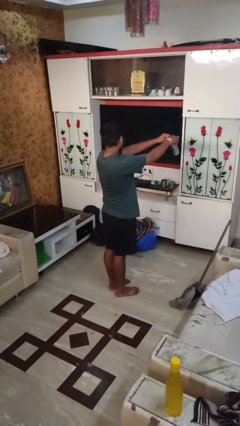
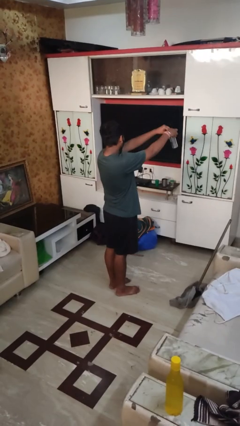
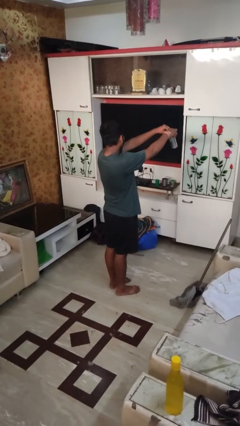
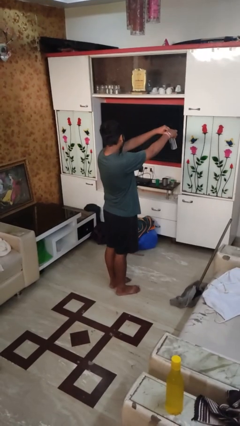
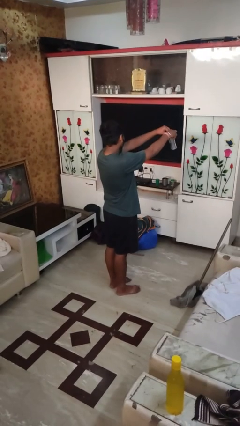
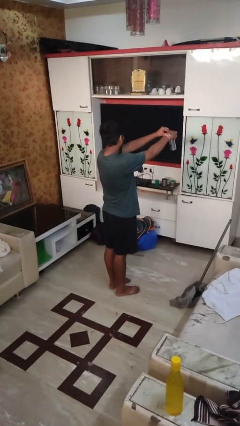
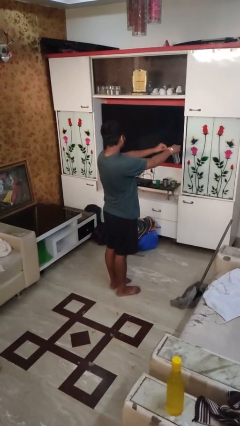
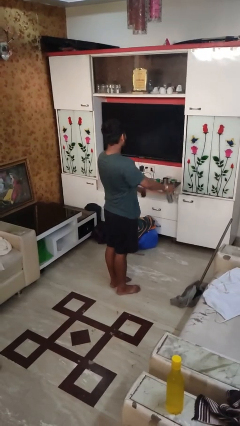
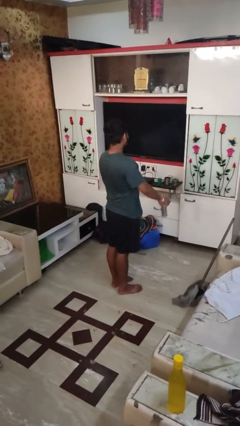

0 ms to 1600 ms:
person opens beverage can

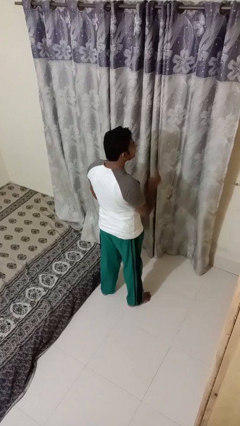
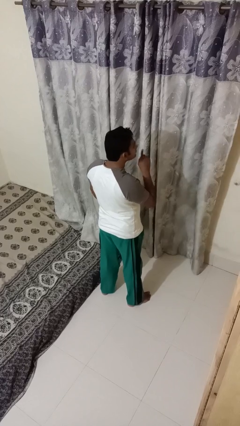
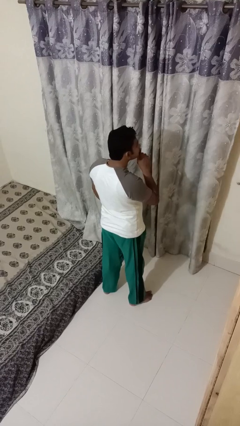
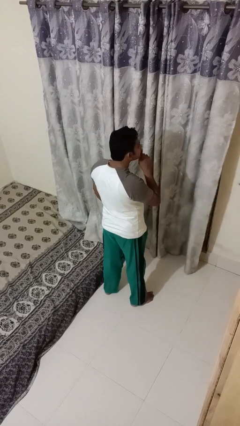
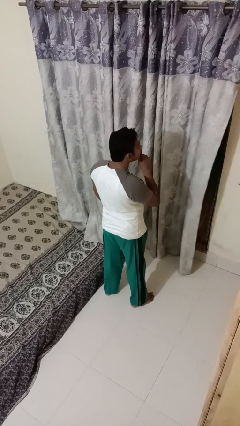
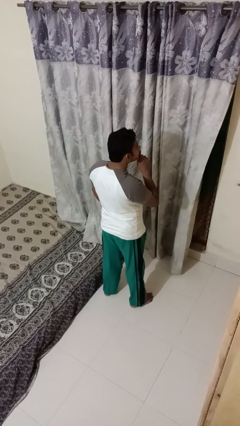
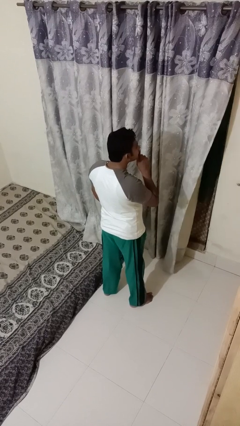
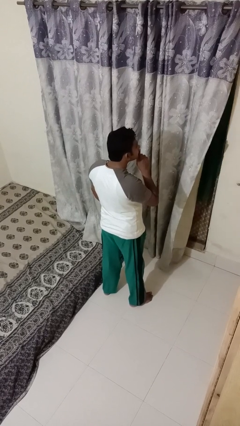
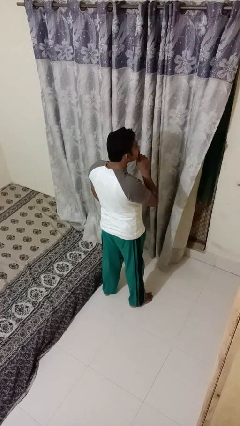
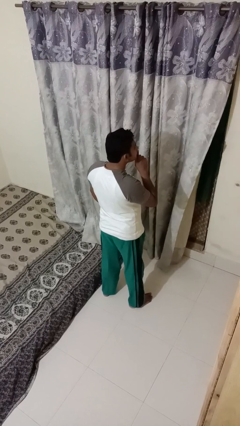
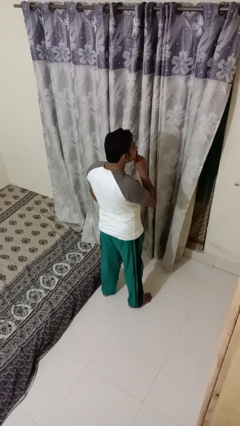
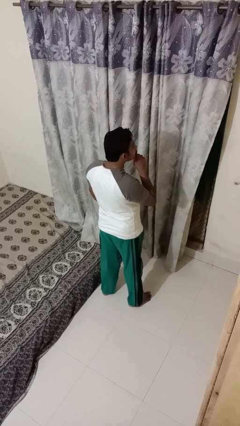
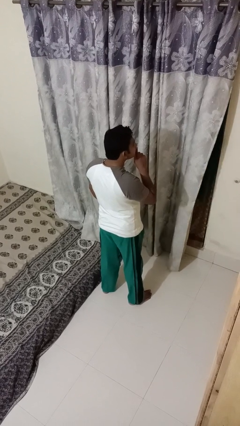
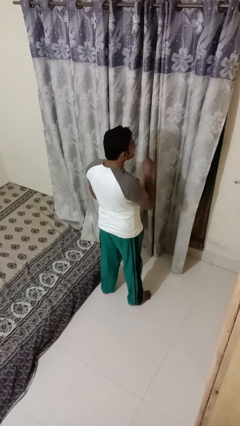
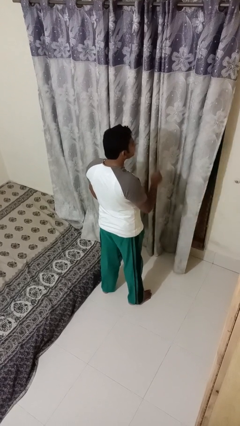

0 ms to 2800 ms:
person gestures be quiet

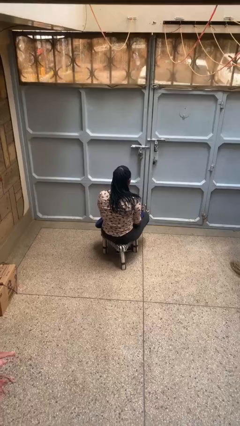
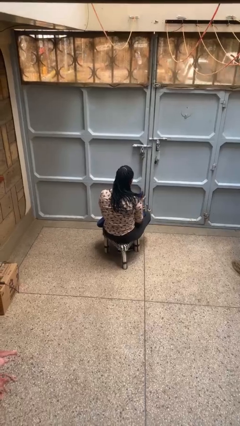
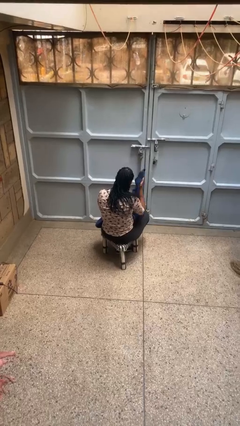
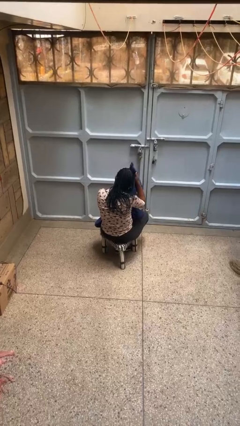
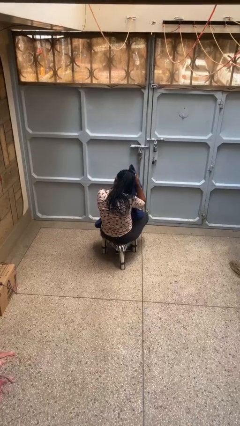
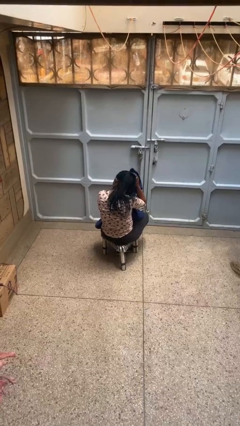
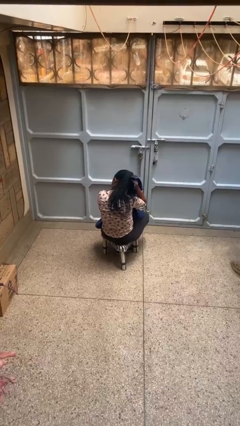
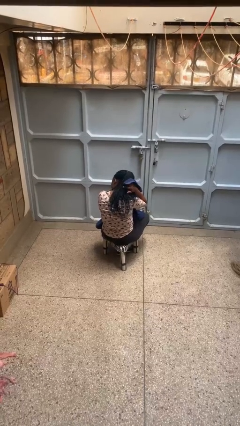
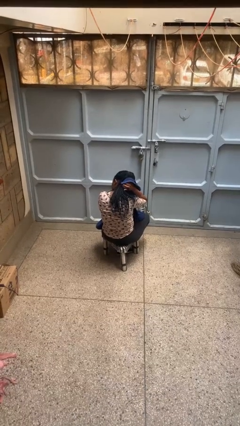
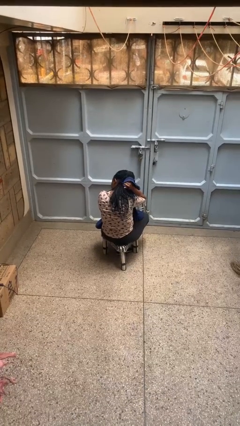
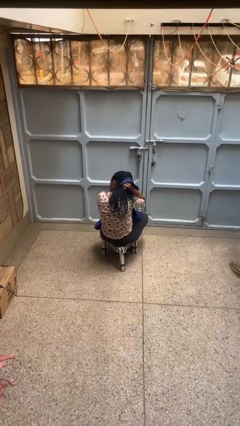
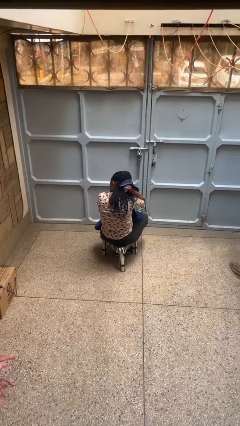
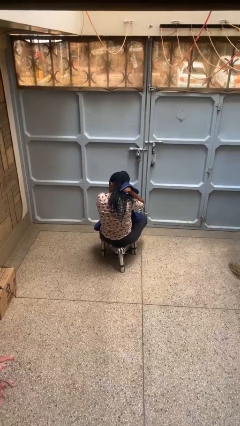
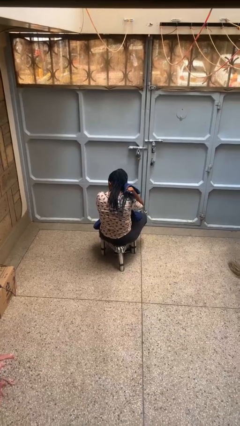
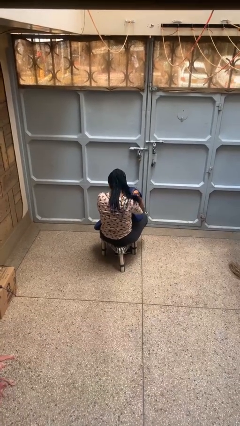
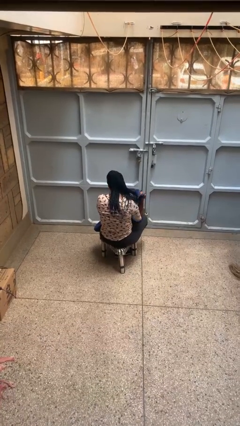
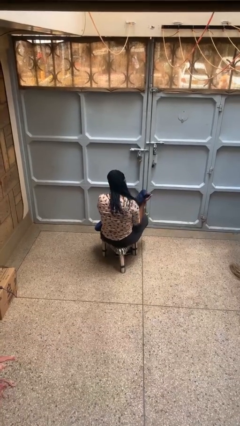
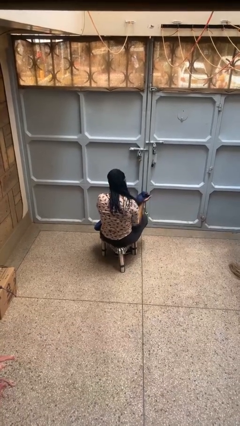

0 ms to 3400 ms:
person dries hair with towel

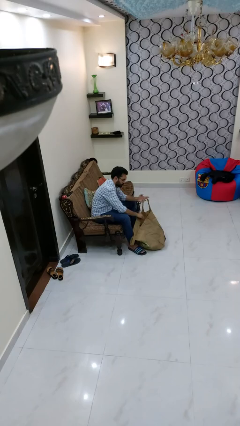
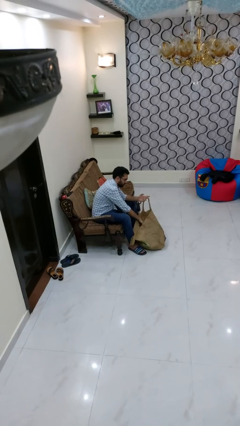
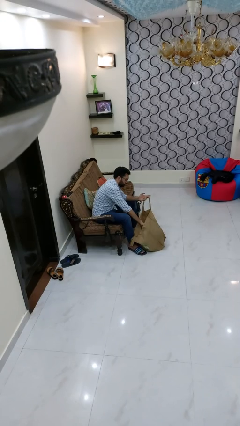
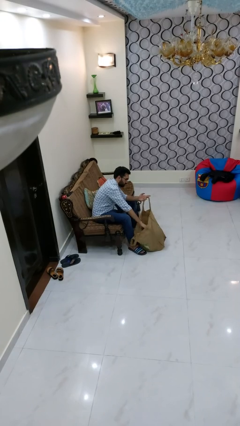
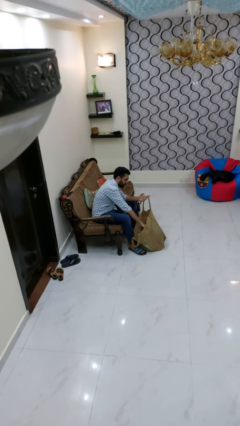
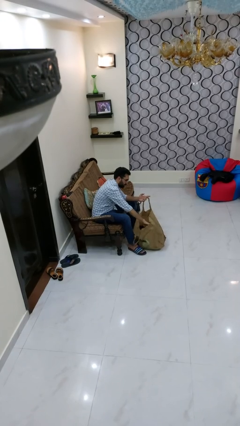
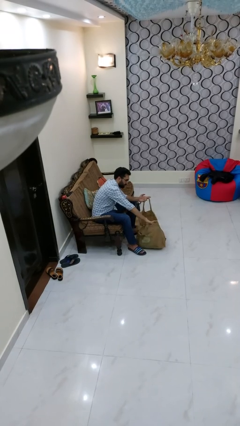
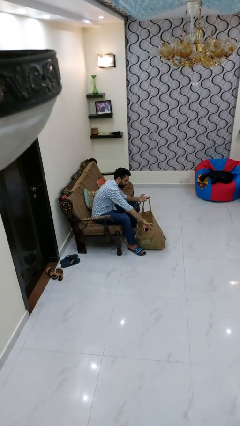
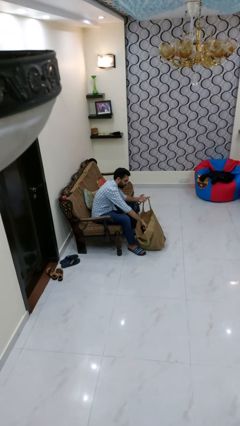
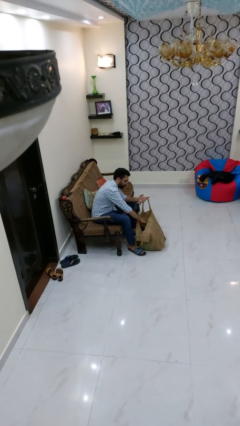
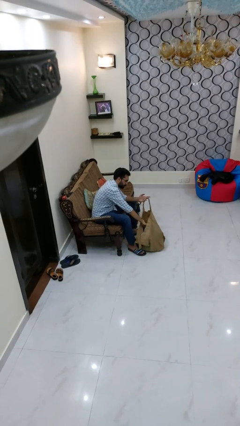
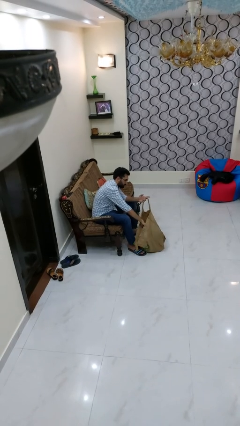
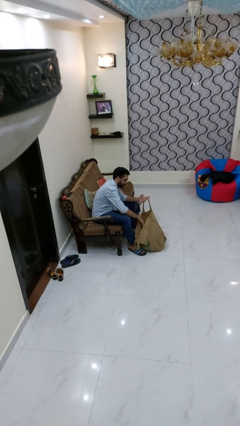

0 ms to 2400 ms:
person searches in bag

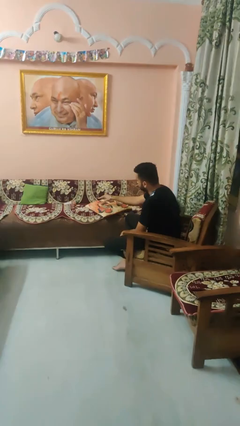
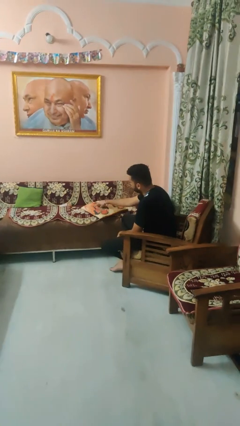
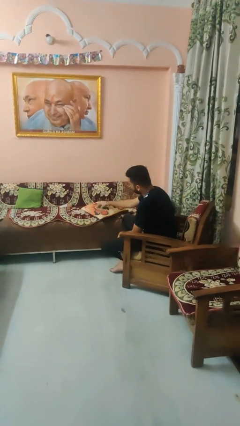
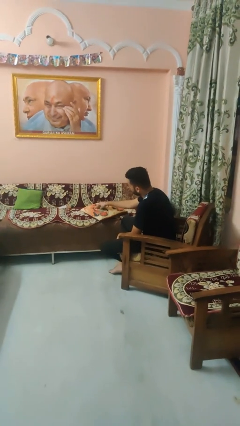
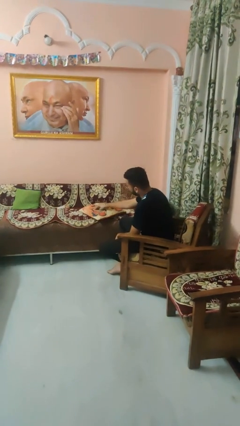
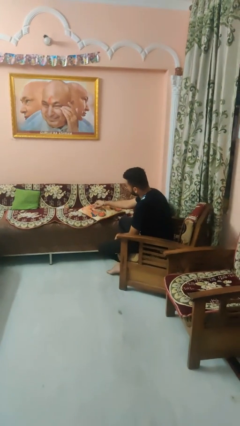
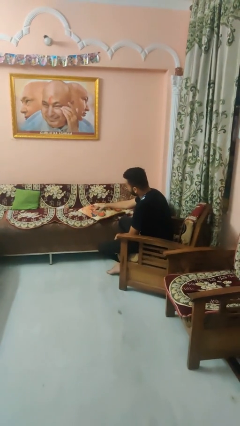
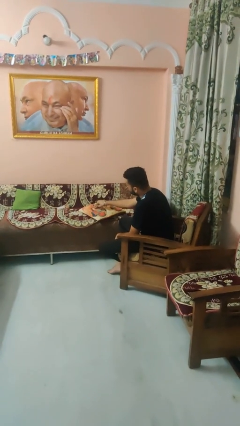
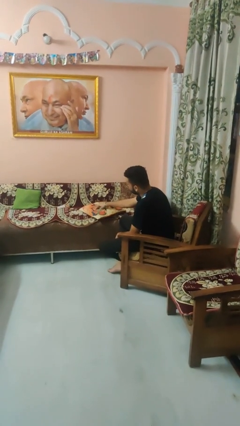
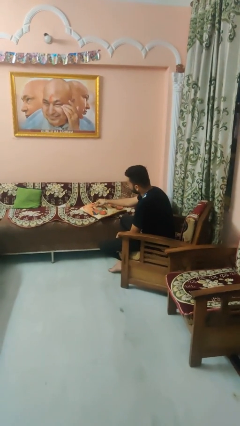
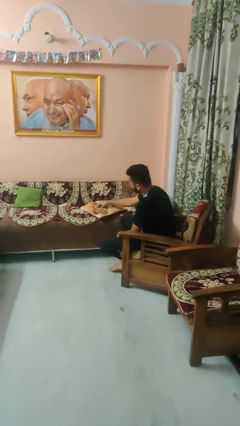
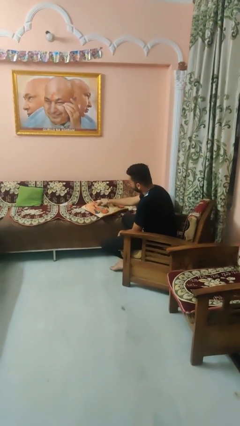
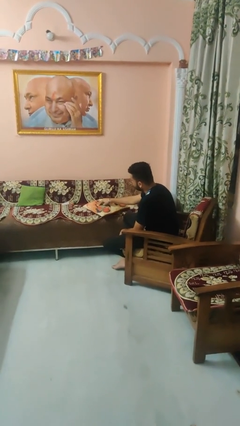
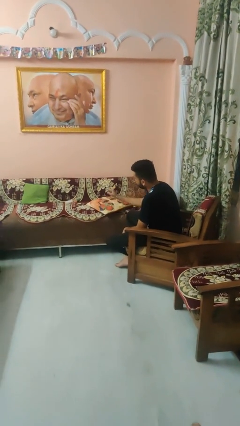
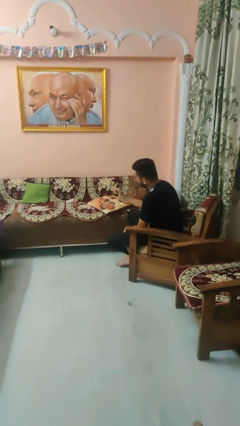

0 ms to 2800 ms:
person taps object with finger

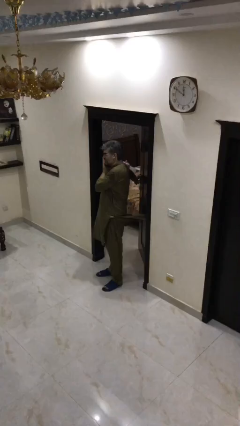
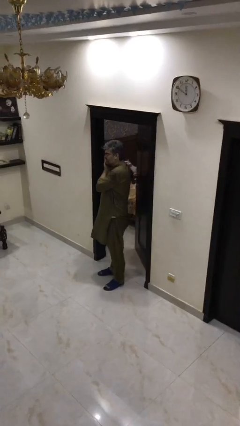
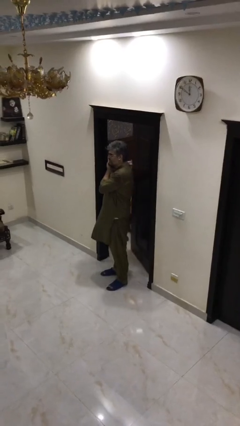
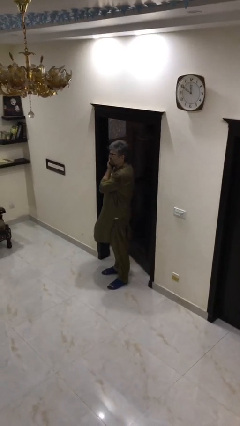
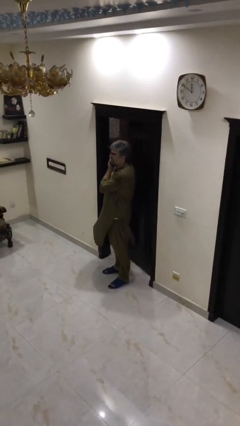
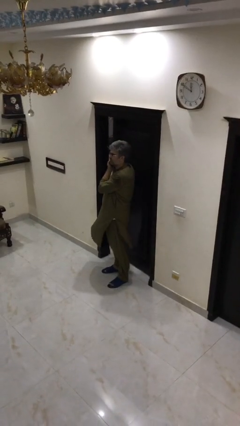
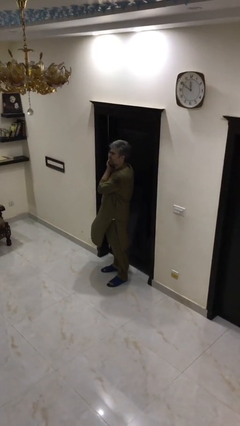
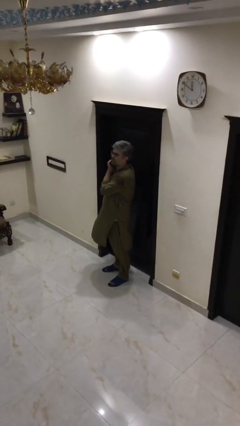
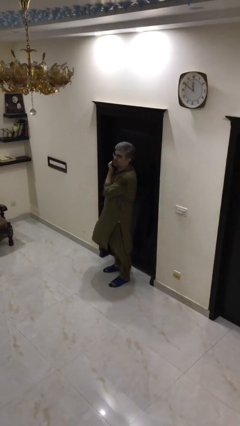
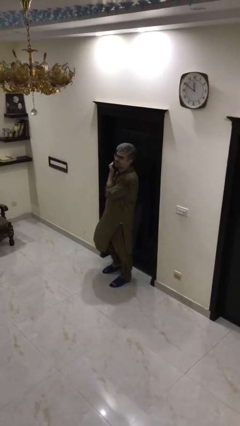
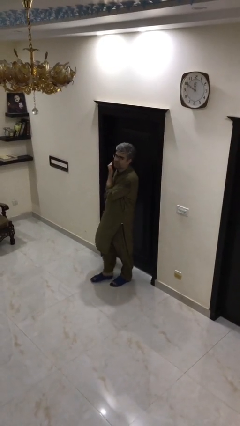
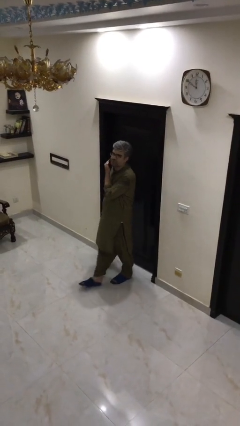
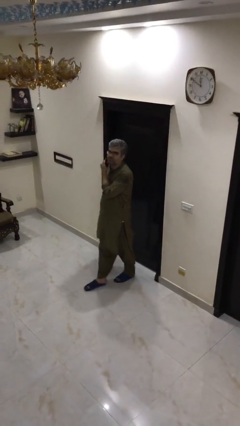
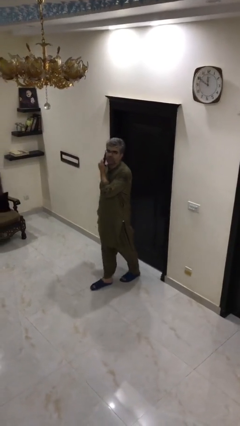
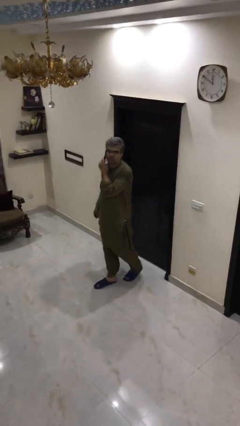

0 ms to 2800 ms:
person closes facility door

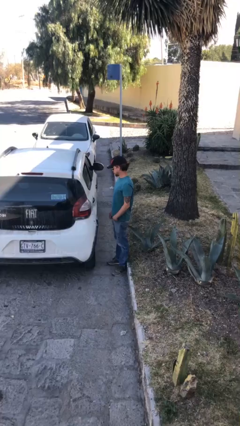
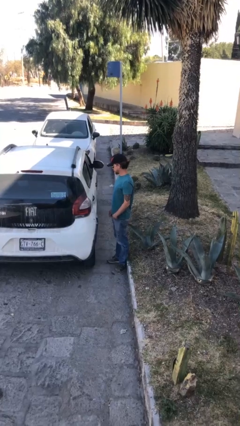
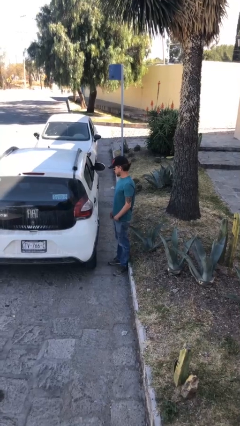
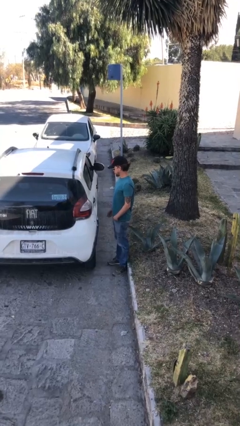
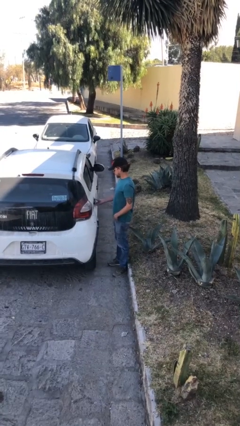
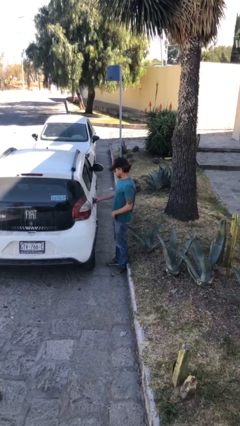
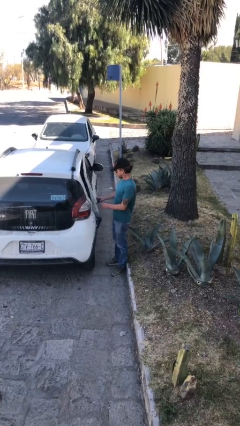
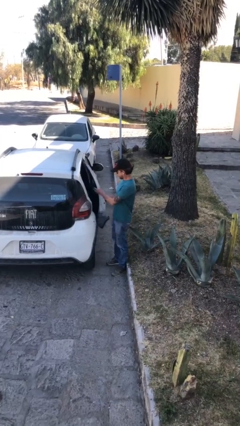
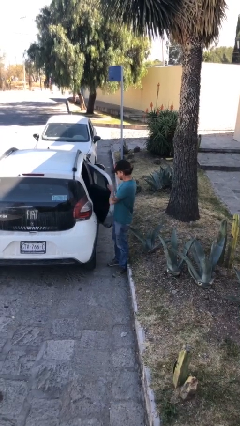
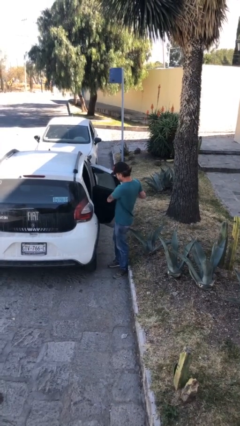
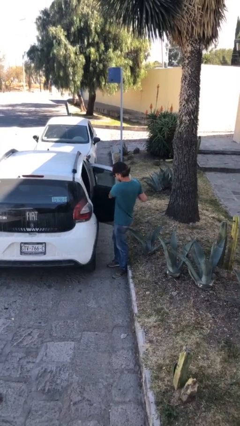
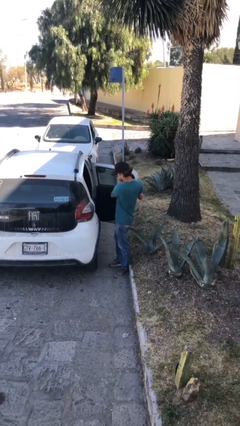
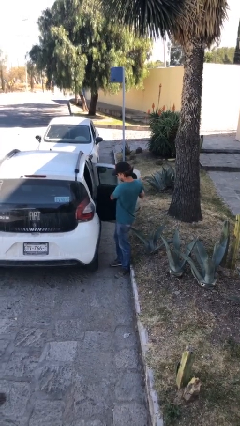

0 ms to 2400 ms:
person opens car door
